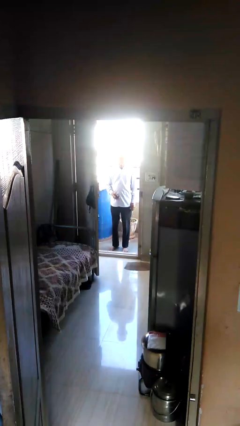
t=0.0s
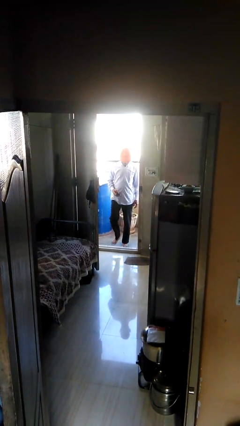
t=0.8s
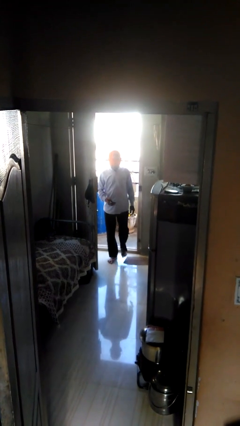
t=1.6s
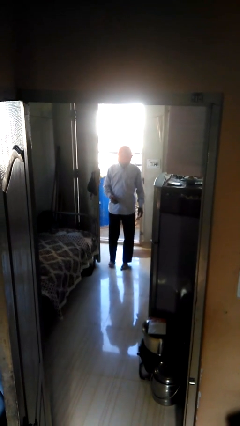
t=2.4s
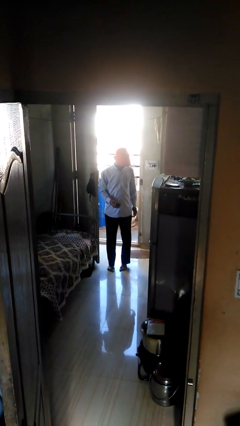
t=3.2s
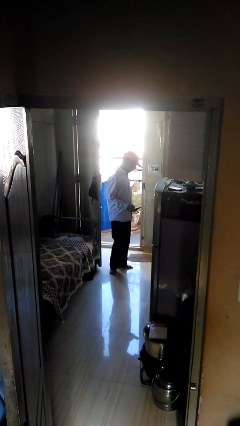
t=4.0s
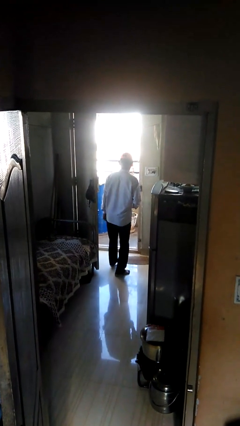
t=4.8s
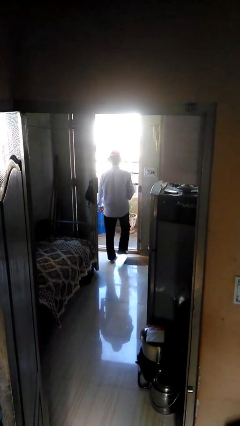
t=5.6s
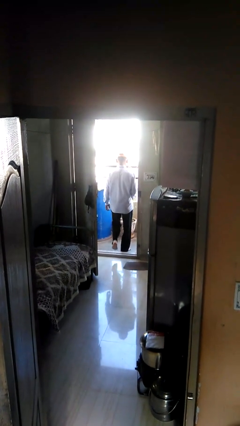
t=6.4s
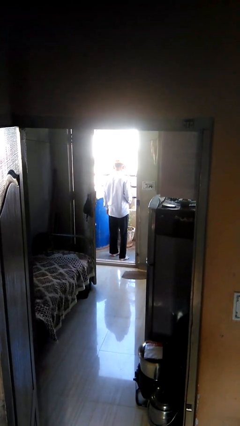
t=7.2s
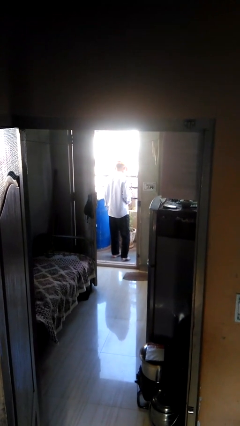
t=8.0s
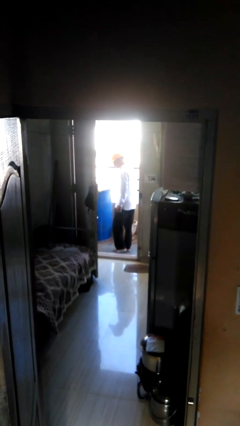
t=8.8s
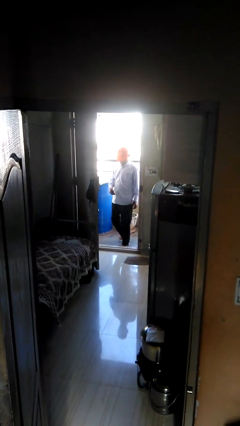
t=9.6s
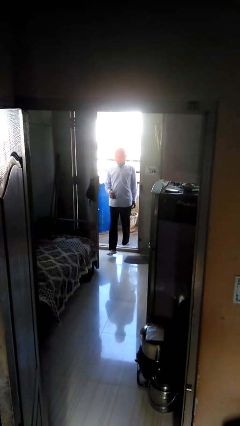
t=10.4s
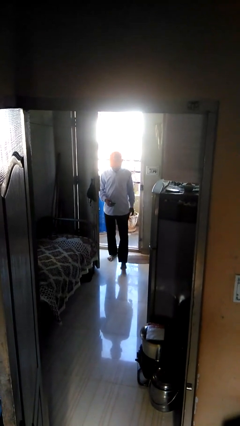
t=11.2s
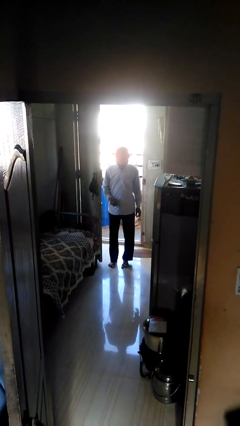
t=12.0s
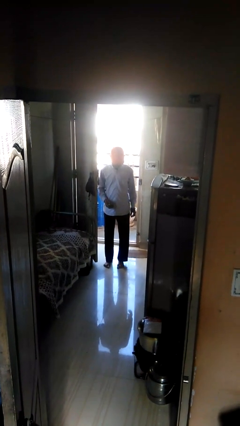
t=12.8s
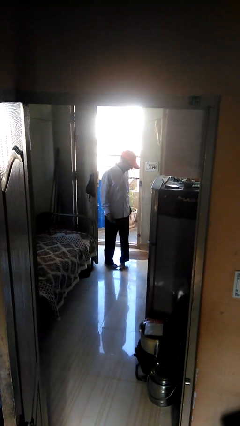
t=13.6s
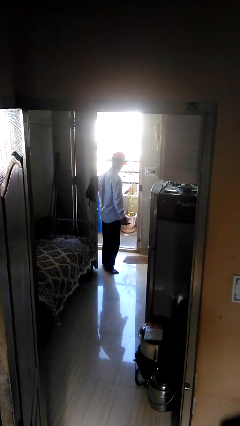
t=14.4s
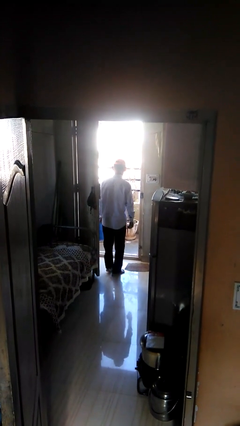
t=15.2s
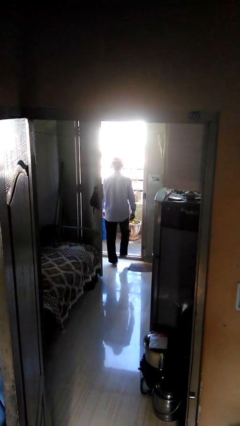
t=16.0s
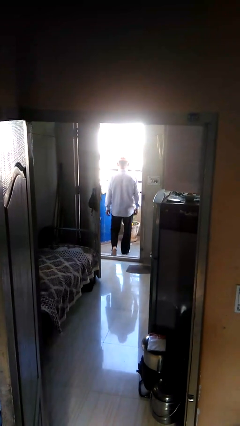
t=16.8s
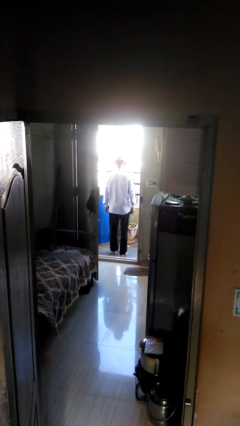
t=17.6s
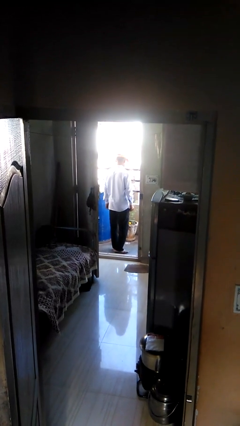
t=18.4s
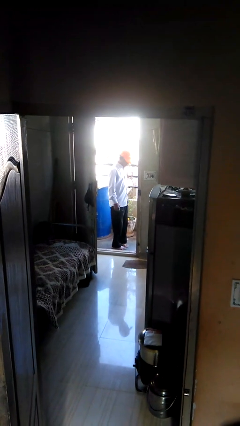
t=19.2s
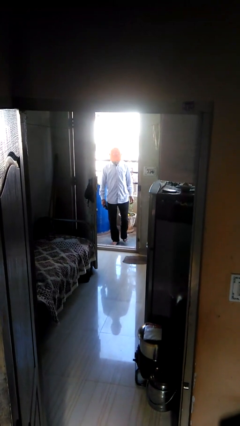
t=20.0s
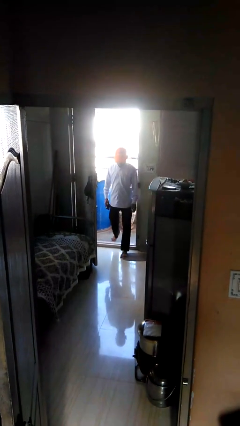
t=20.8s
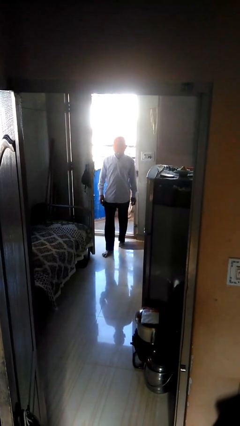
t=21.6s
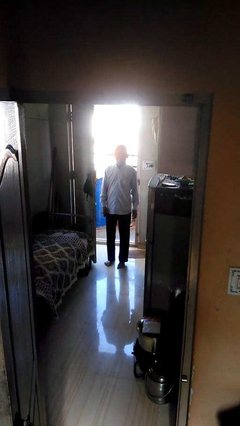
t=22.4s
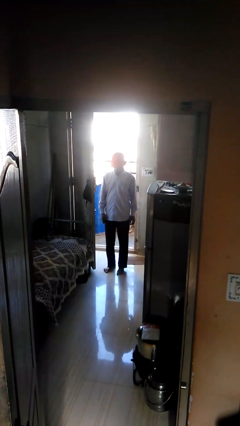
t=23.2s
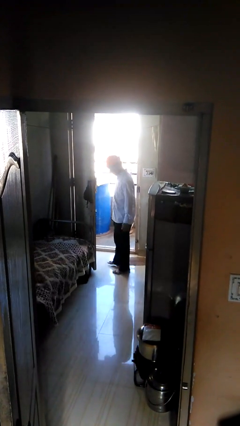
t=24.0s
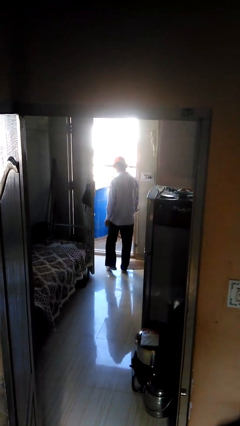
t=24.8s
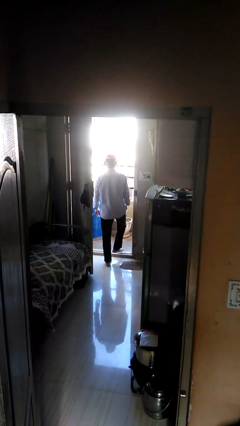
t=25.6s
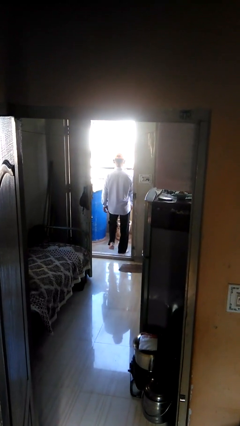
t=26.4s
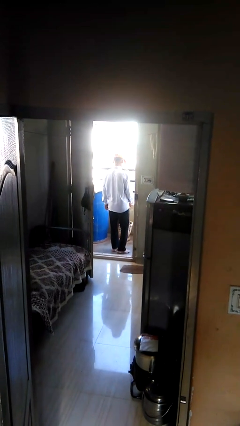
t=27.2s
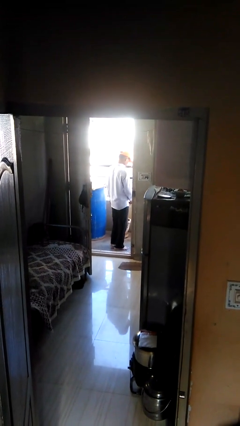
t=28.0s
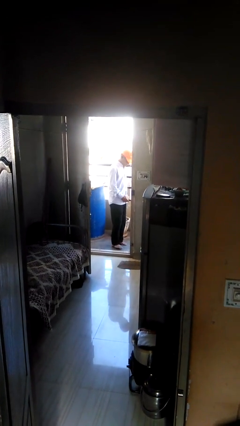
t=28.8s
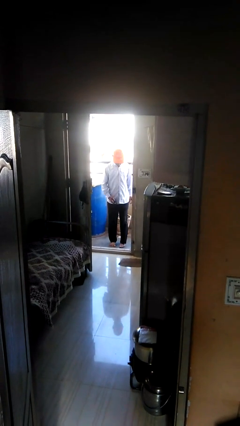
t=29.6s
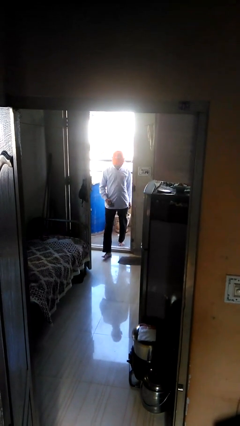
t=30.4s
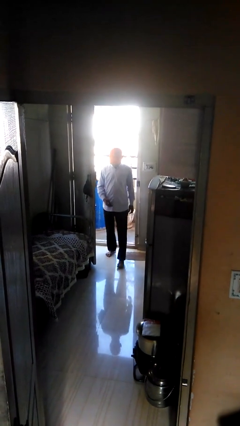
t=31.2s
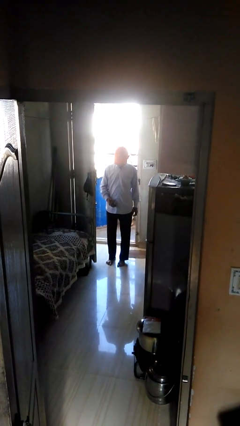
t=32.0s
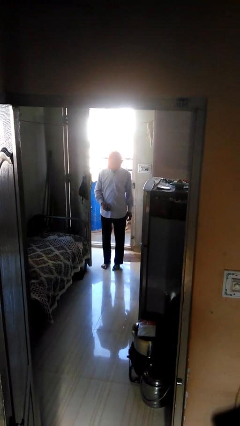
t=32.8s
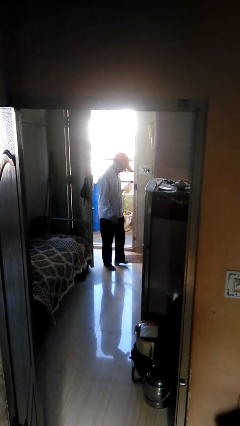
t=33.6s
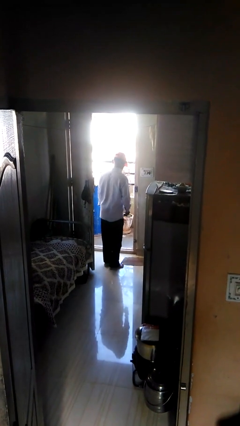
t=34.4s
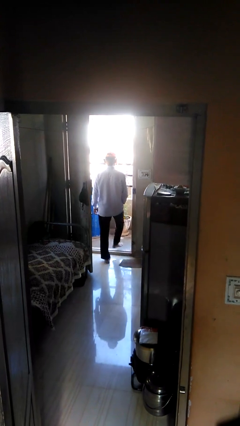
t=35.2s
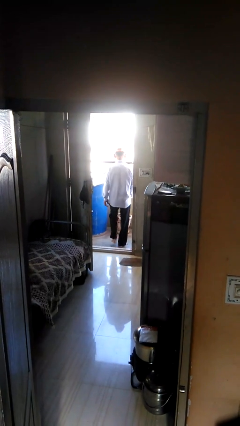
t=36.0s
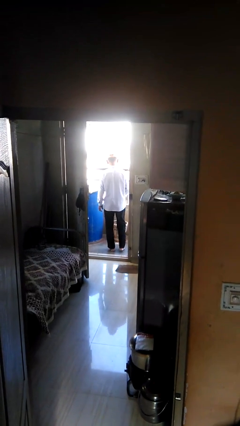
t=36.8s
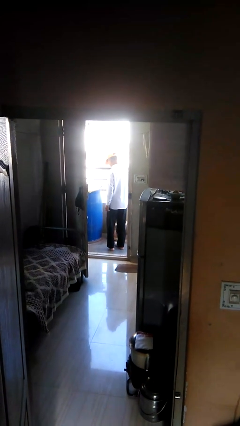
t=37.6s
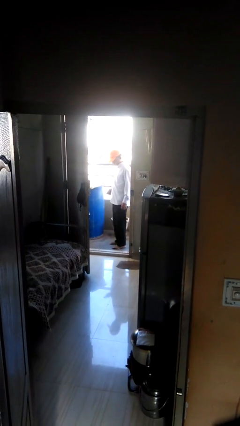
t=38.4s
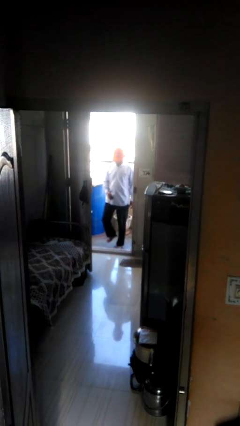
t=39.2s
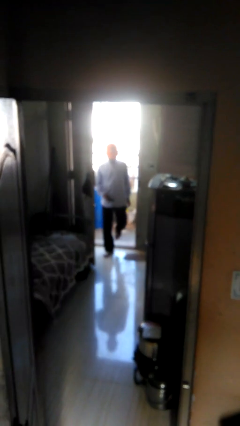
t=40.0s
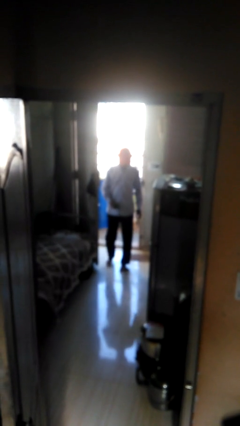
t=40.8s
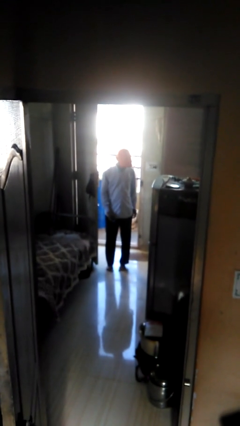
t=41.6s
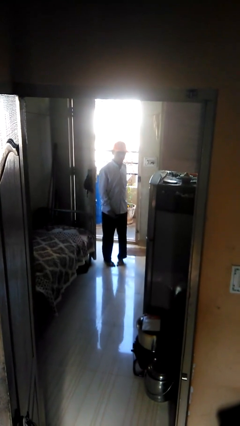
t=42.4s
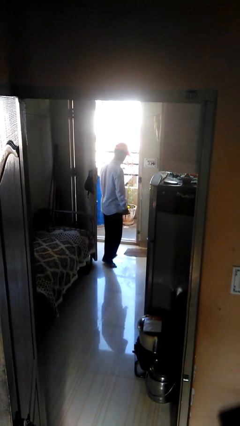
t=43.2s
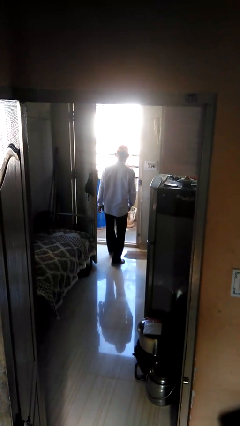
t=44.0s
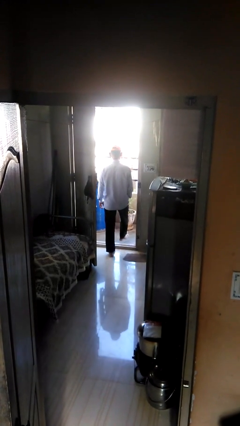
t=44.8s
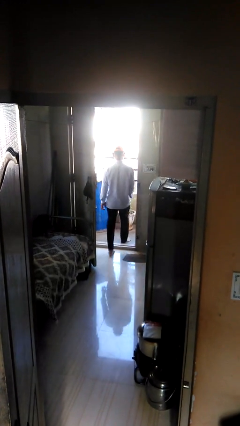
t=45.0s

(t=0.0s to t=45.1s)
person texts on phone

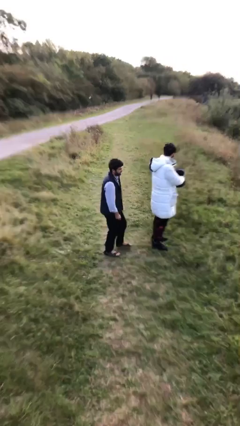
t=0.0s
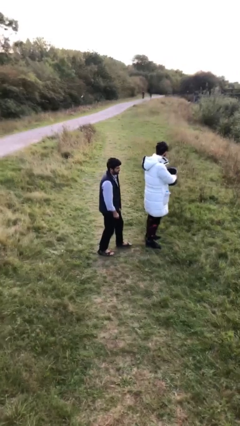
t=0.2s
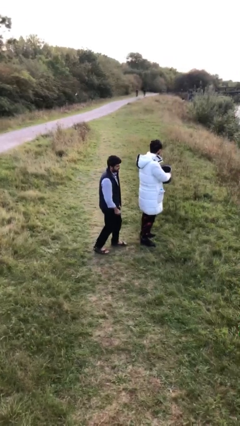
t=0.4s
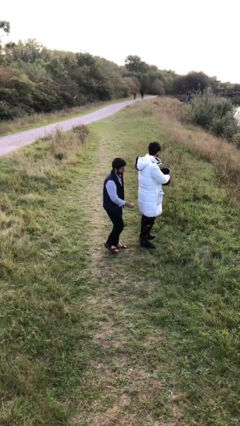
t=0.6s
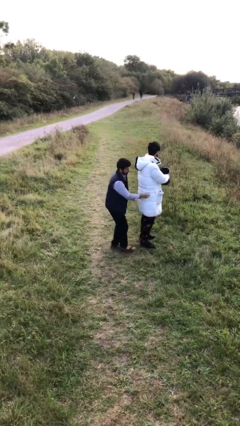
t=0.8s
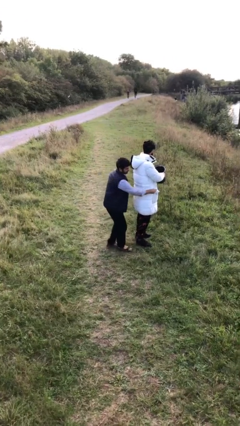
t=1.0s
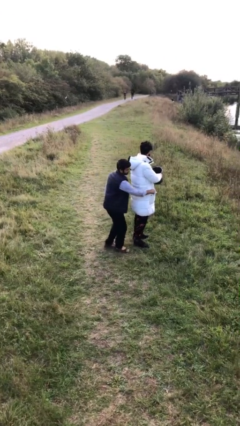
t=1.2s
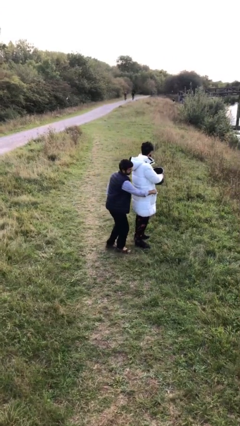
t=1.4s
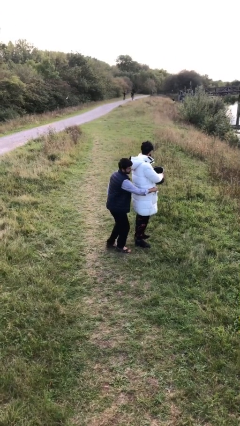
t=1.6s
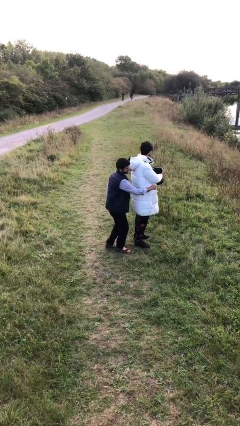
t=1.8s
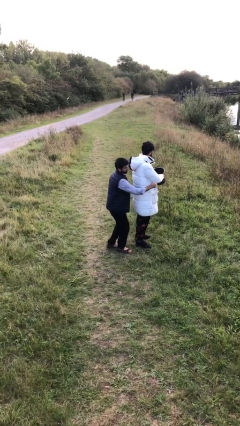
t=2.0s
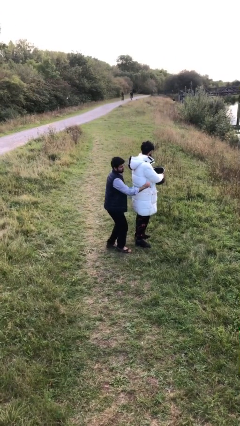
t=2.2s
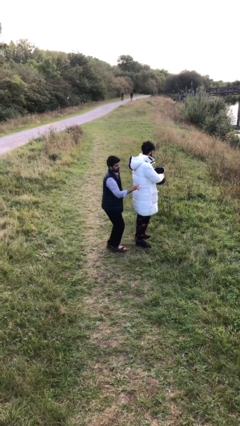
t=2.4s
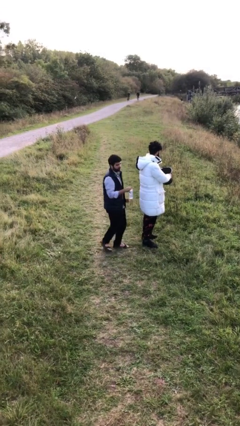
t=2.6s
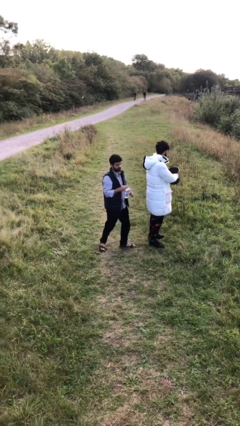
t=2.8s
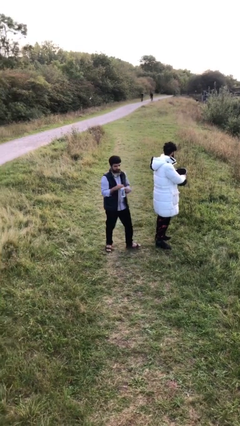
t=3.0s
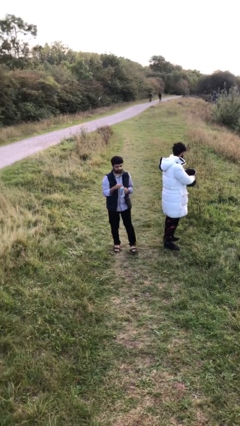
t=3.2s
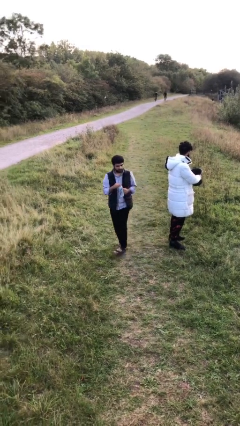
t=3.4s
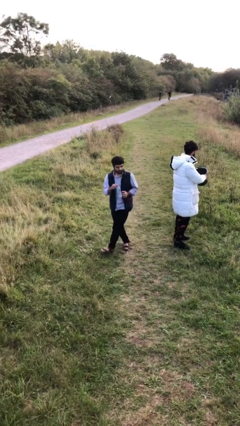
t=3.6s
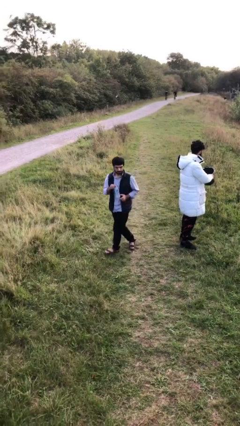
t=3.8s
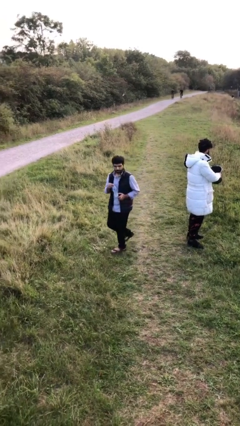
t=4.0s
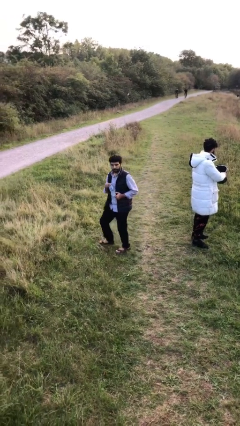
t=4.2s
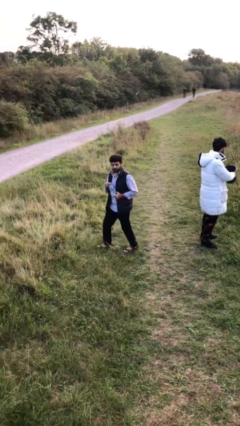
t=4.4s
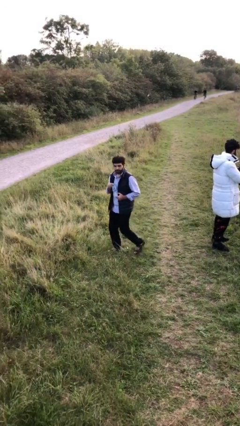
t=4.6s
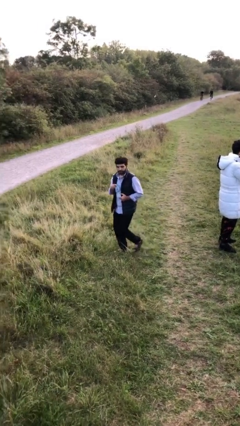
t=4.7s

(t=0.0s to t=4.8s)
person steals object from person

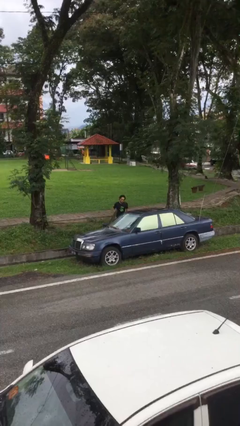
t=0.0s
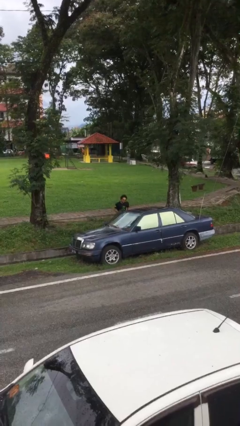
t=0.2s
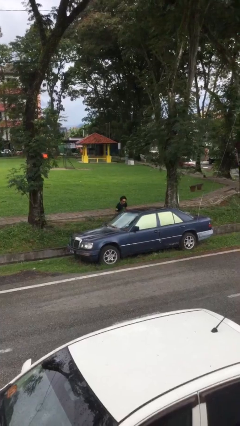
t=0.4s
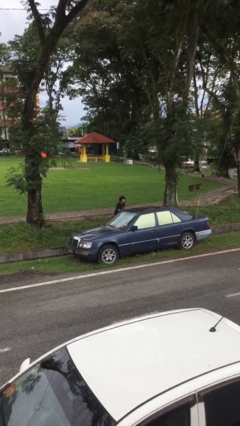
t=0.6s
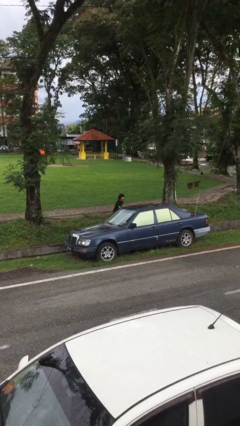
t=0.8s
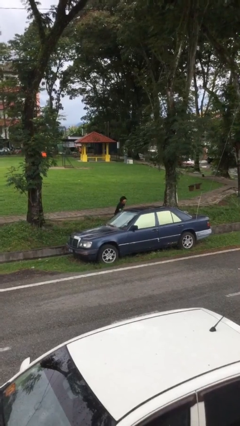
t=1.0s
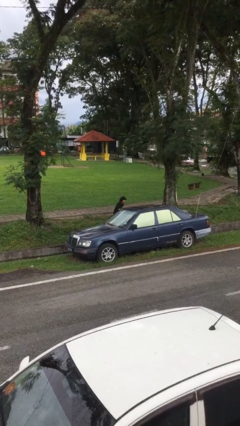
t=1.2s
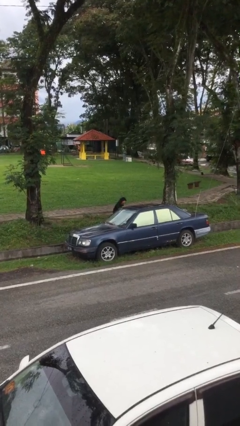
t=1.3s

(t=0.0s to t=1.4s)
person closes car door

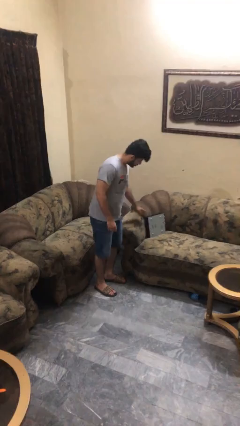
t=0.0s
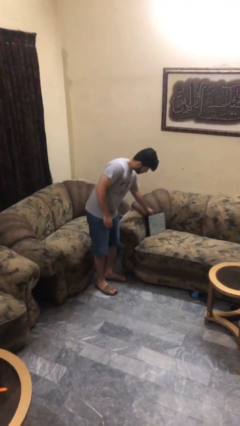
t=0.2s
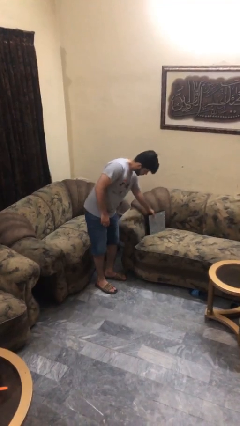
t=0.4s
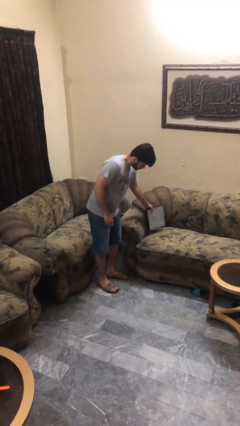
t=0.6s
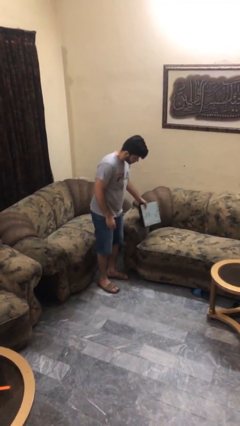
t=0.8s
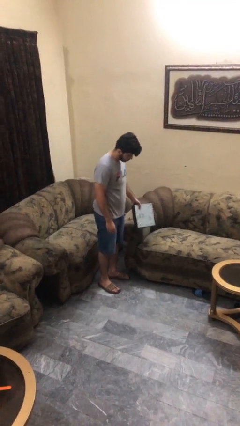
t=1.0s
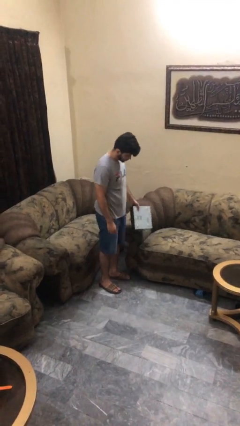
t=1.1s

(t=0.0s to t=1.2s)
person picks up object from couch
